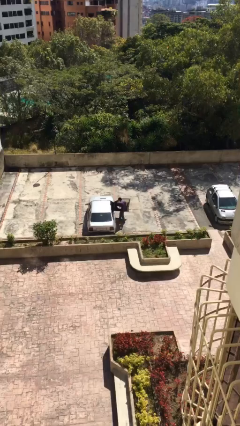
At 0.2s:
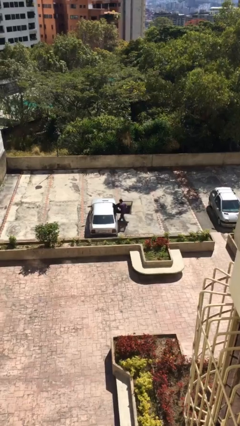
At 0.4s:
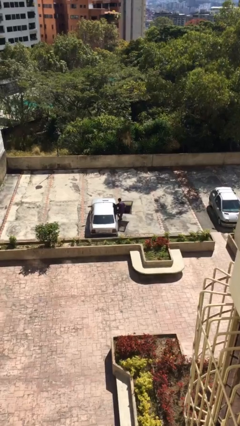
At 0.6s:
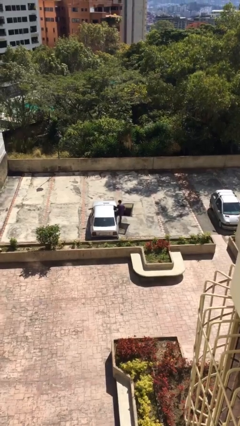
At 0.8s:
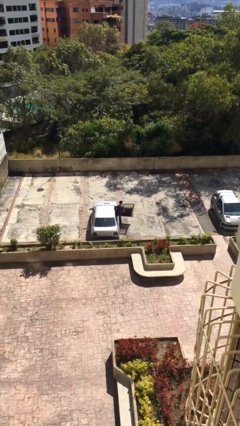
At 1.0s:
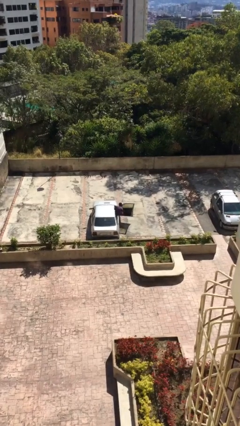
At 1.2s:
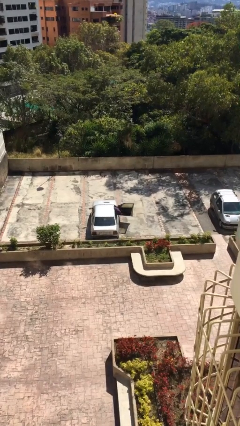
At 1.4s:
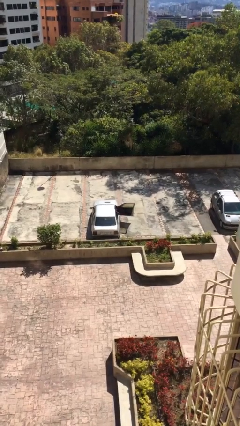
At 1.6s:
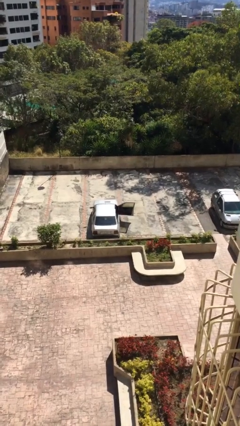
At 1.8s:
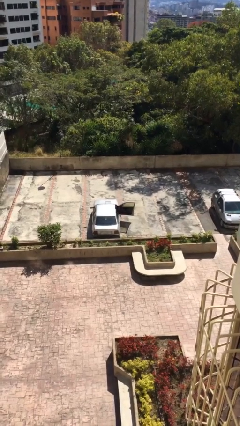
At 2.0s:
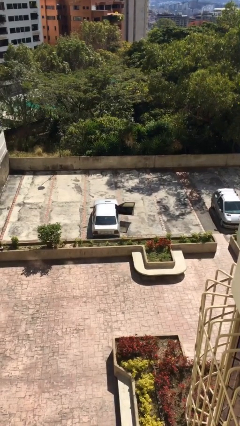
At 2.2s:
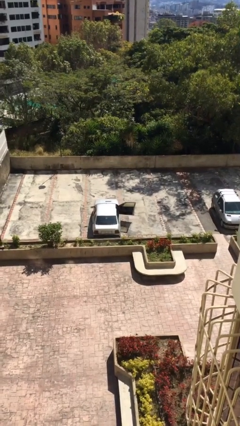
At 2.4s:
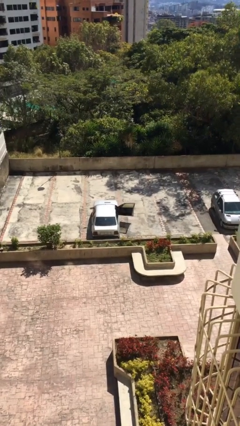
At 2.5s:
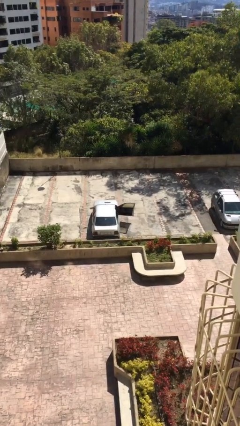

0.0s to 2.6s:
person enters car

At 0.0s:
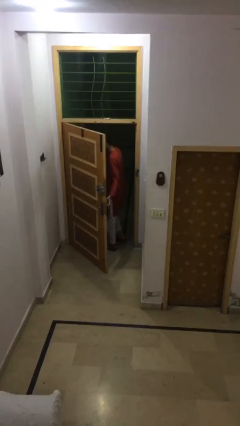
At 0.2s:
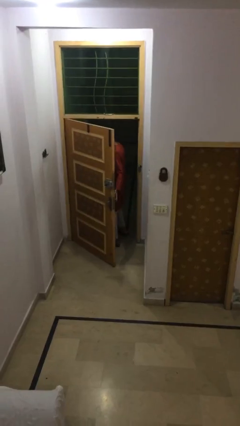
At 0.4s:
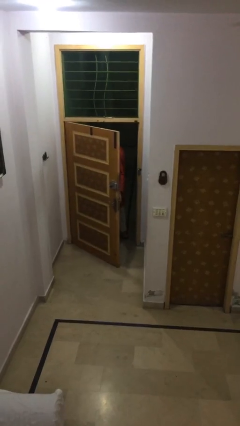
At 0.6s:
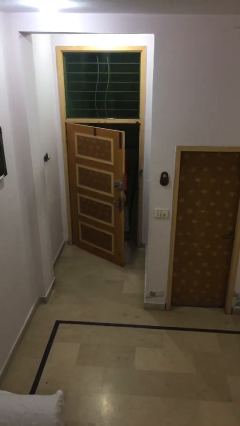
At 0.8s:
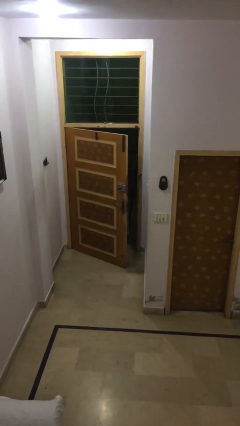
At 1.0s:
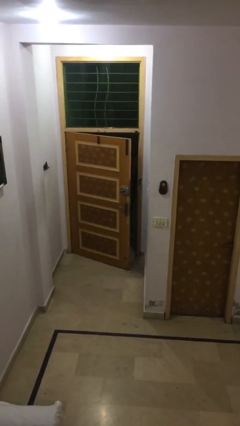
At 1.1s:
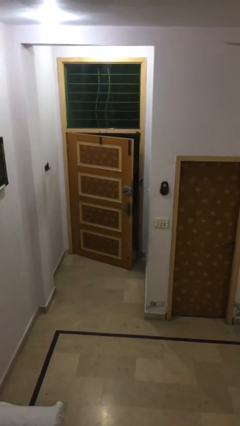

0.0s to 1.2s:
person closes facility door

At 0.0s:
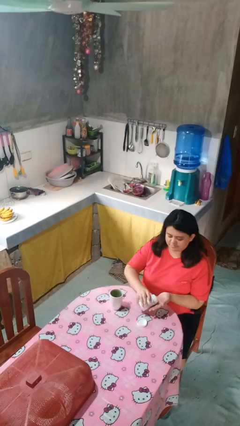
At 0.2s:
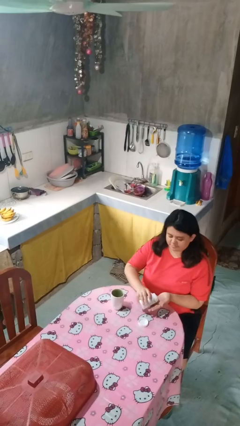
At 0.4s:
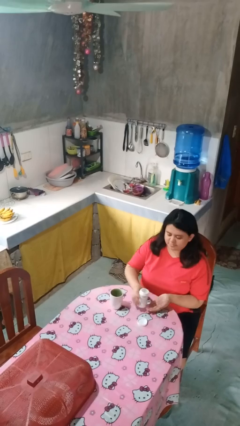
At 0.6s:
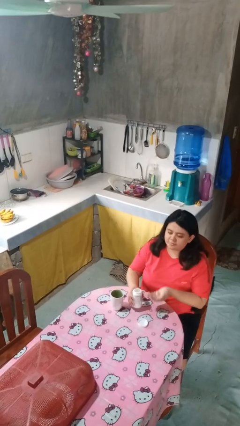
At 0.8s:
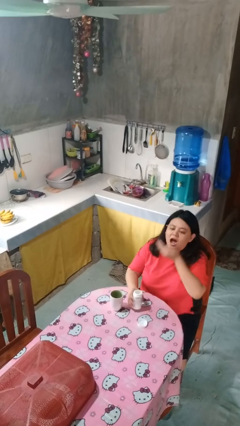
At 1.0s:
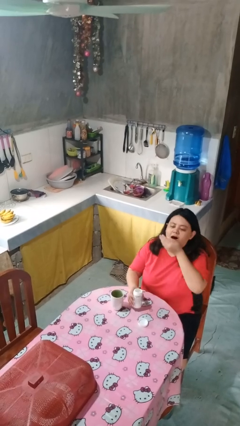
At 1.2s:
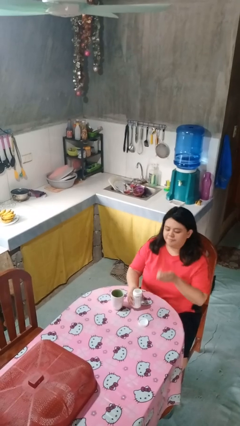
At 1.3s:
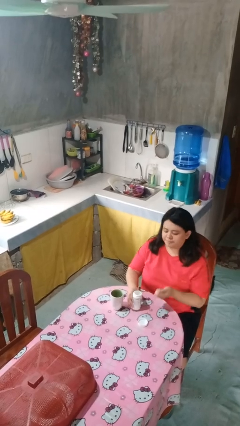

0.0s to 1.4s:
person takes medicine pills

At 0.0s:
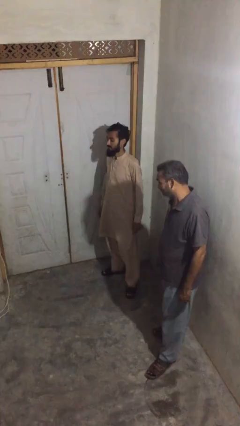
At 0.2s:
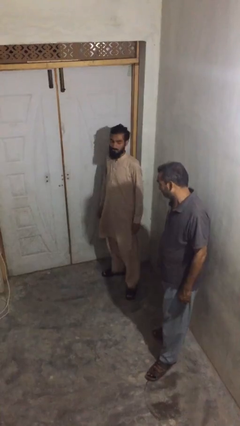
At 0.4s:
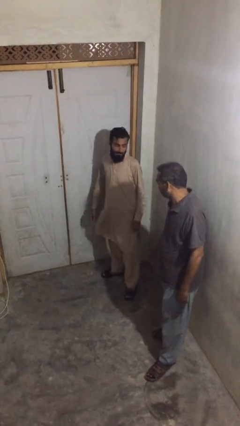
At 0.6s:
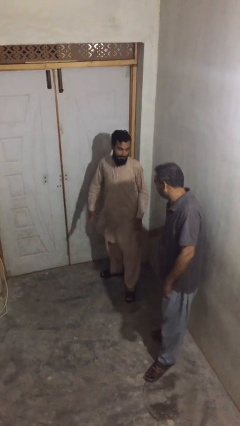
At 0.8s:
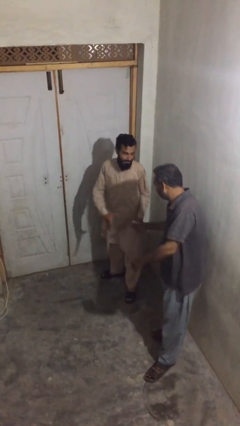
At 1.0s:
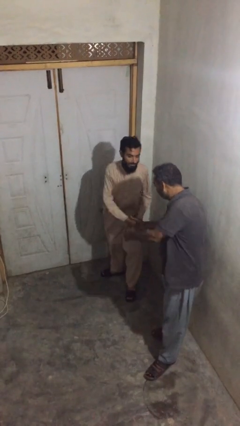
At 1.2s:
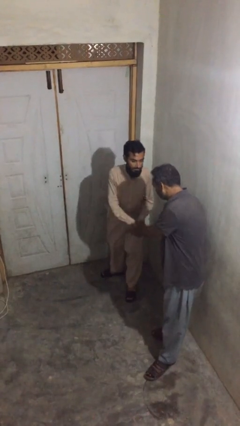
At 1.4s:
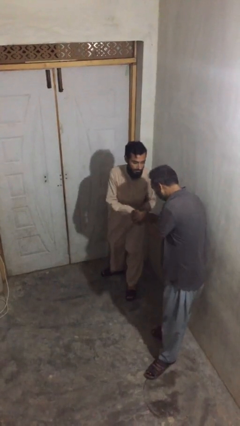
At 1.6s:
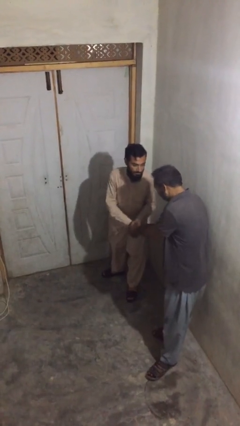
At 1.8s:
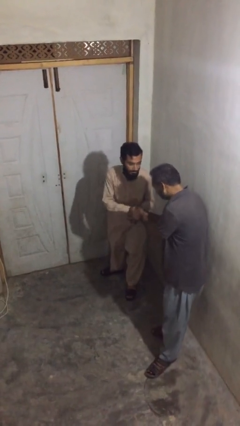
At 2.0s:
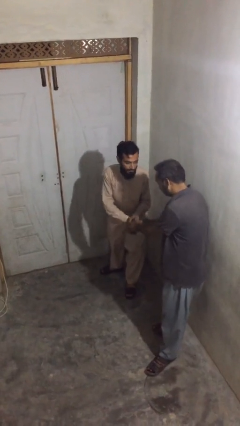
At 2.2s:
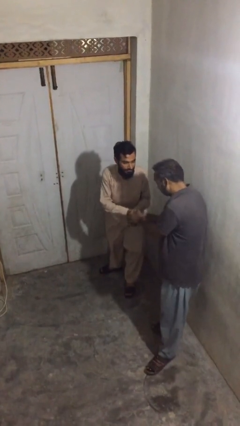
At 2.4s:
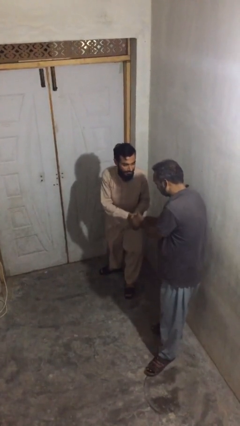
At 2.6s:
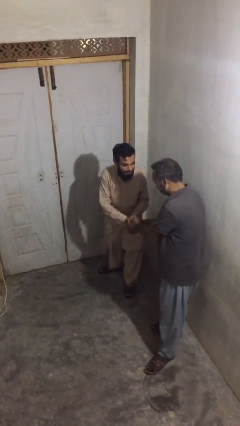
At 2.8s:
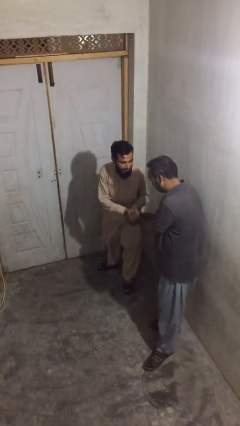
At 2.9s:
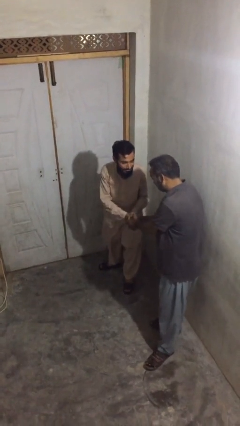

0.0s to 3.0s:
person shakes hand

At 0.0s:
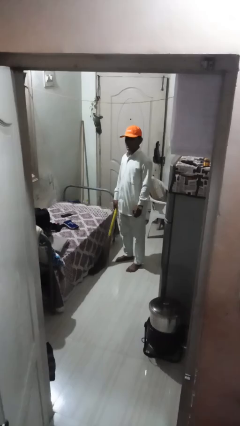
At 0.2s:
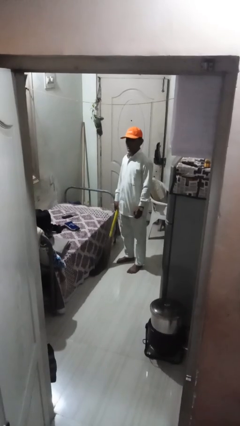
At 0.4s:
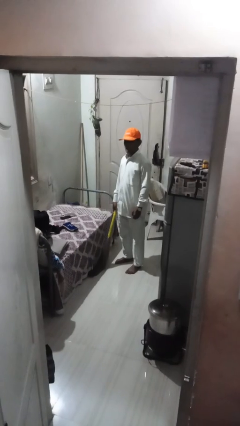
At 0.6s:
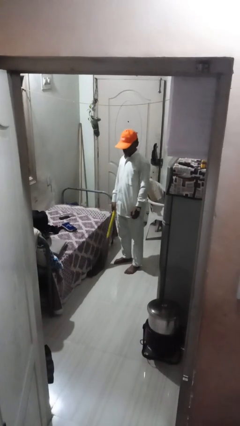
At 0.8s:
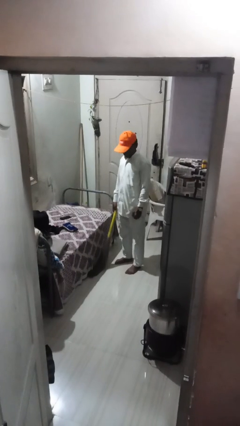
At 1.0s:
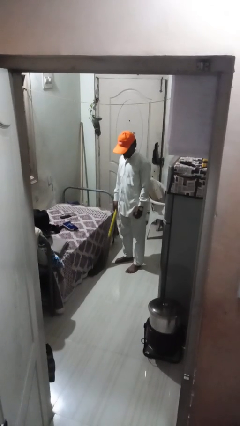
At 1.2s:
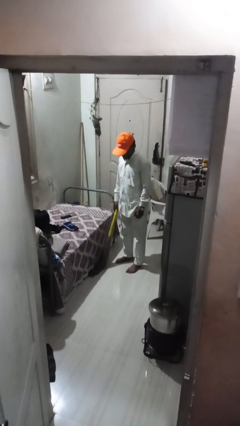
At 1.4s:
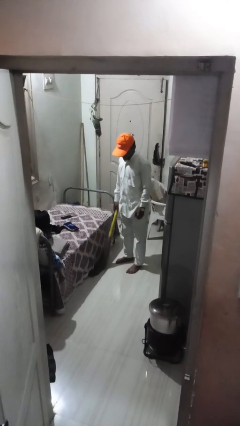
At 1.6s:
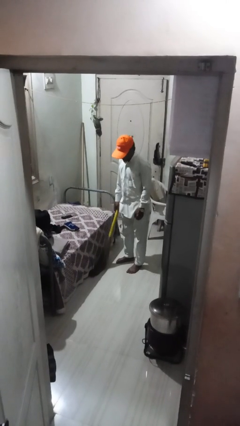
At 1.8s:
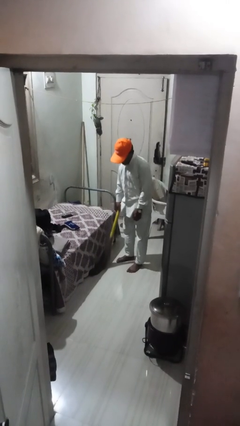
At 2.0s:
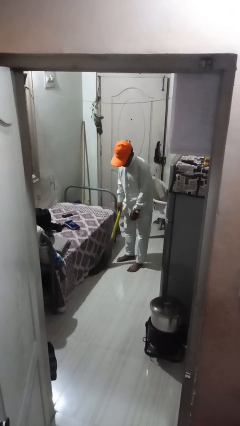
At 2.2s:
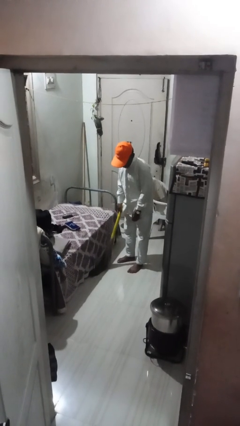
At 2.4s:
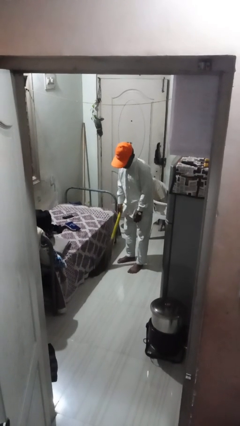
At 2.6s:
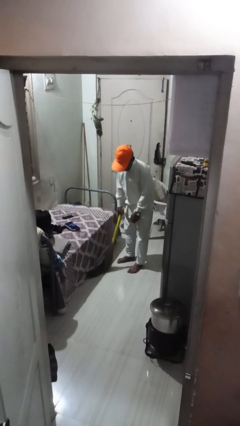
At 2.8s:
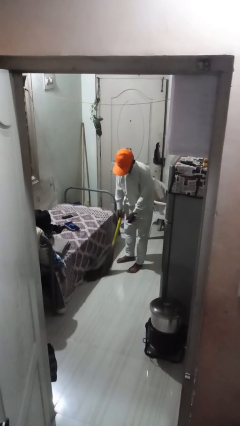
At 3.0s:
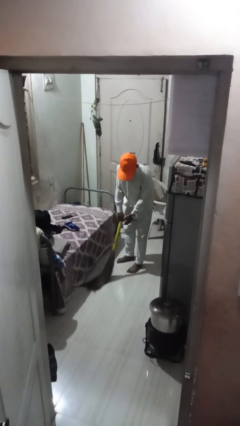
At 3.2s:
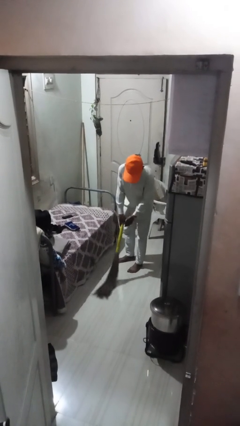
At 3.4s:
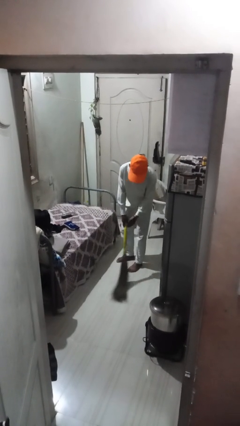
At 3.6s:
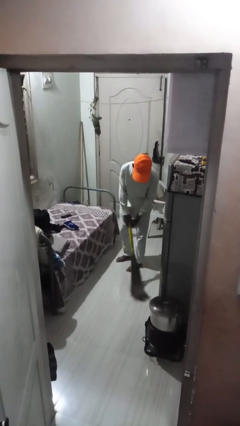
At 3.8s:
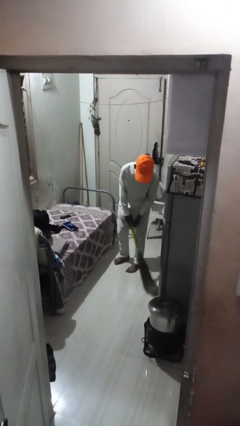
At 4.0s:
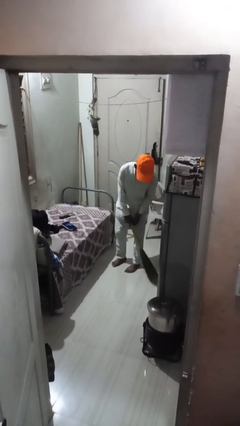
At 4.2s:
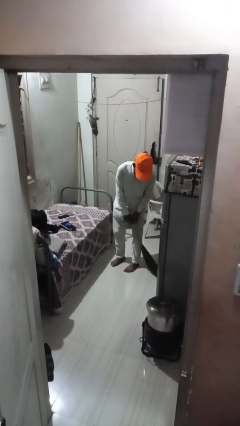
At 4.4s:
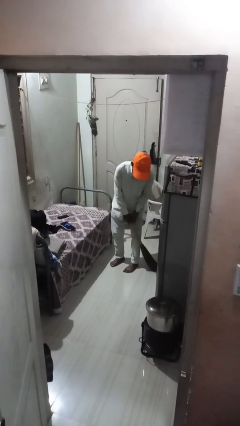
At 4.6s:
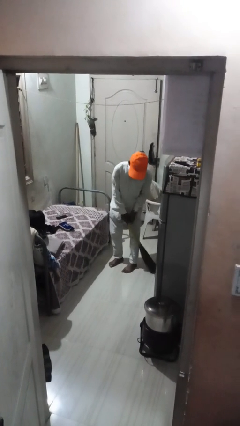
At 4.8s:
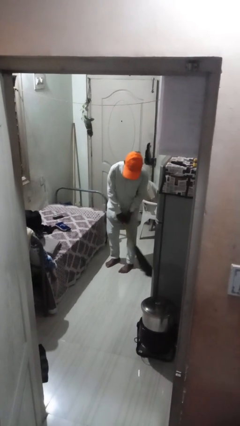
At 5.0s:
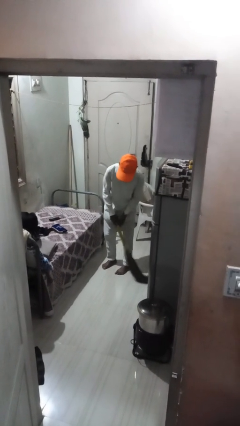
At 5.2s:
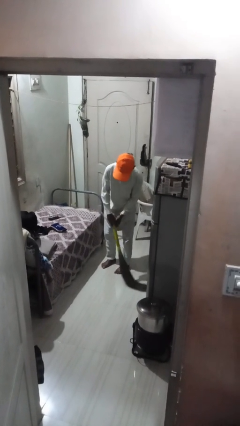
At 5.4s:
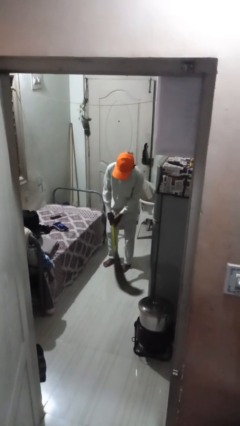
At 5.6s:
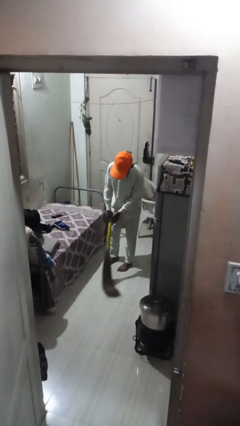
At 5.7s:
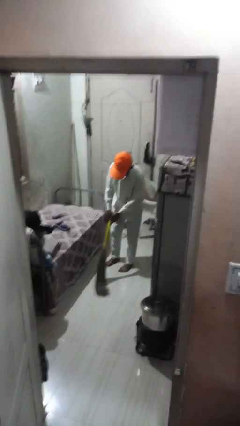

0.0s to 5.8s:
person sweeps floor

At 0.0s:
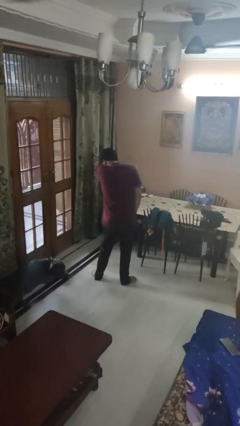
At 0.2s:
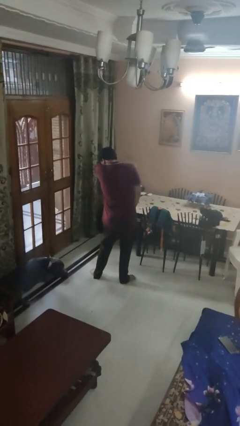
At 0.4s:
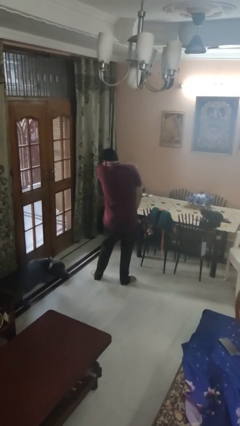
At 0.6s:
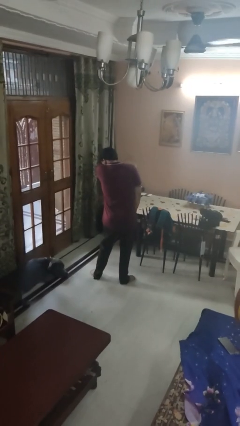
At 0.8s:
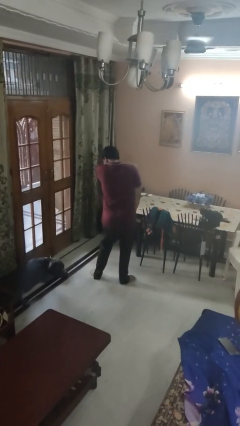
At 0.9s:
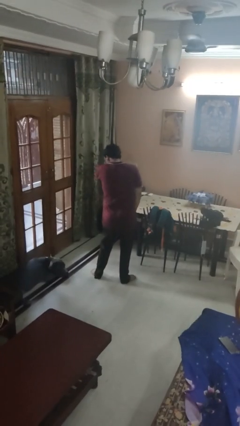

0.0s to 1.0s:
person sneezes into arm

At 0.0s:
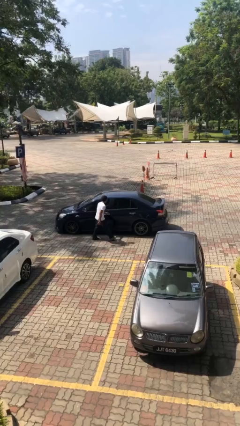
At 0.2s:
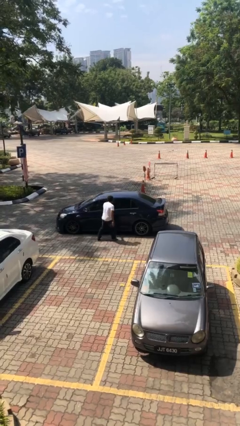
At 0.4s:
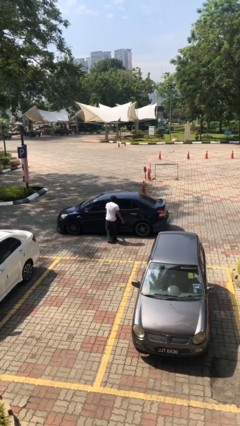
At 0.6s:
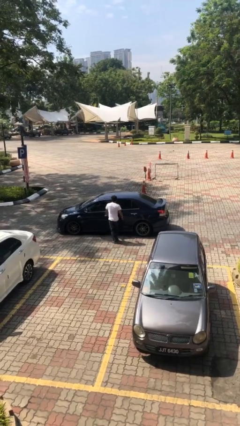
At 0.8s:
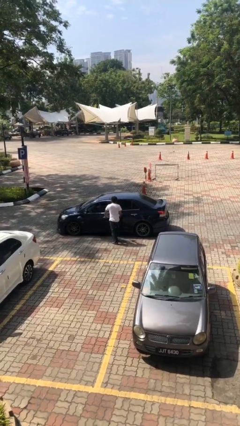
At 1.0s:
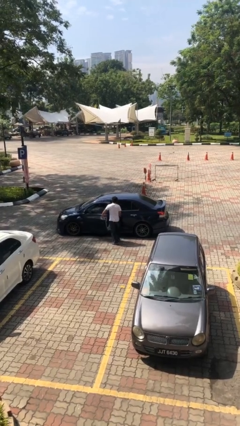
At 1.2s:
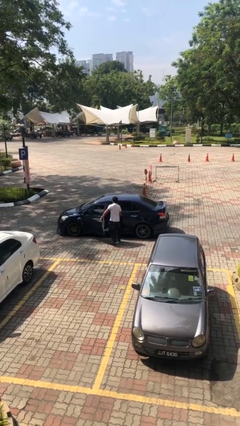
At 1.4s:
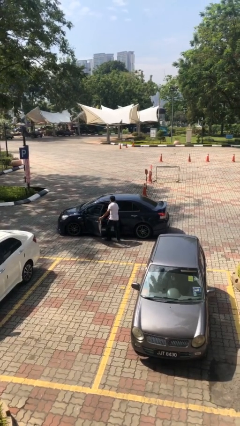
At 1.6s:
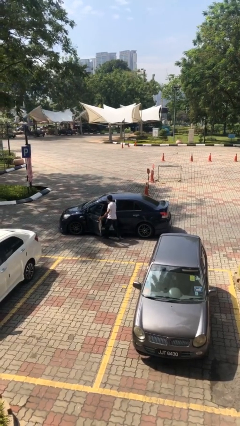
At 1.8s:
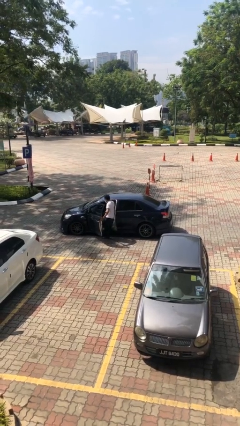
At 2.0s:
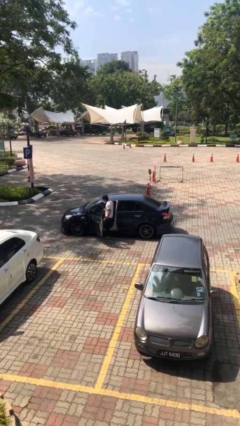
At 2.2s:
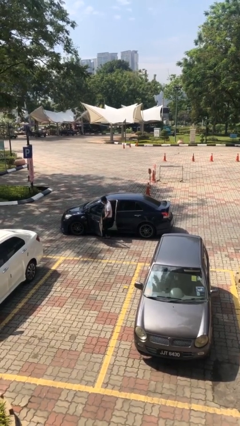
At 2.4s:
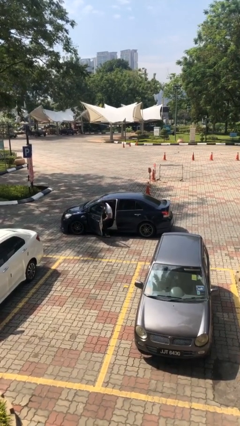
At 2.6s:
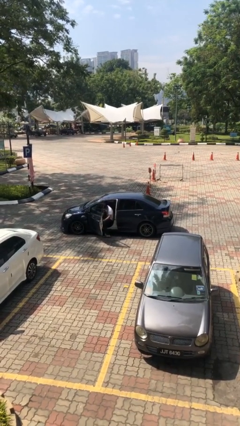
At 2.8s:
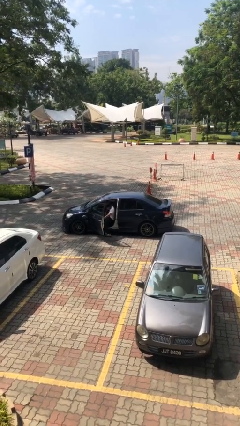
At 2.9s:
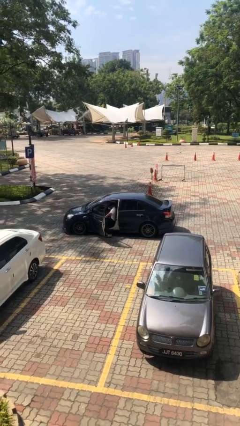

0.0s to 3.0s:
car picks up person
